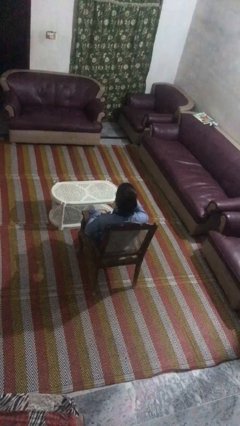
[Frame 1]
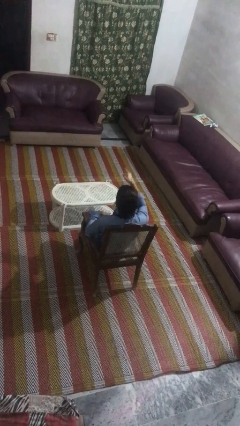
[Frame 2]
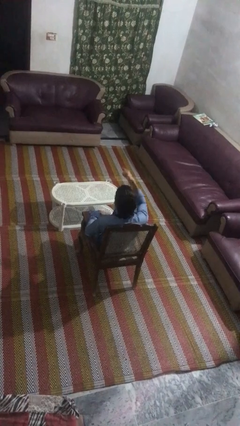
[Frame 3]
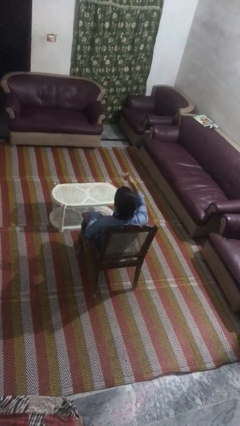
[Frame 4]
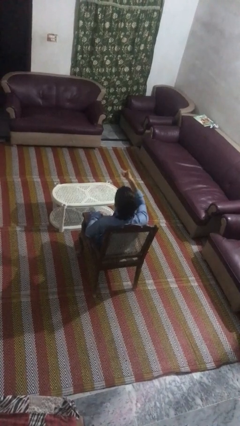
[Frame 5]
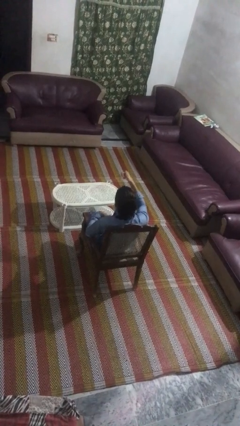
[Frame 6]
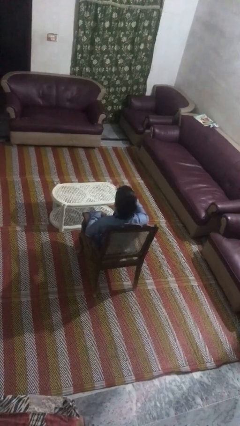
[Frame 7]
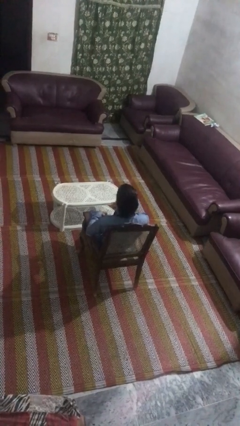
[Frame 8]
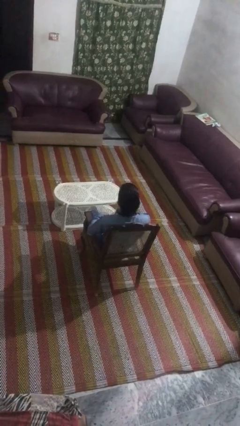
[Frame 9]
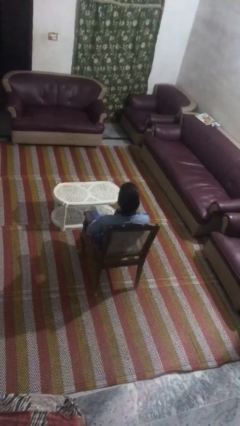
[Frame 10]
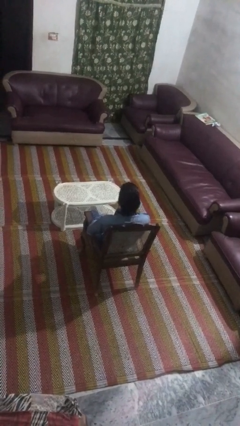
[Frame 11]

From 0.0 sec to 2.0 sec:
person gestures hang loose

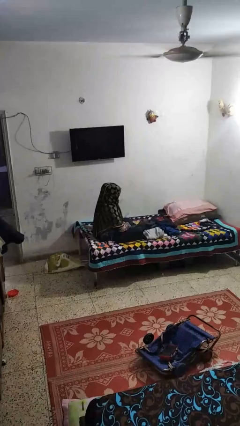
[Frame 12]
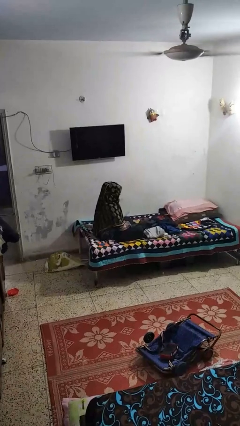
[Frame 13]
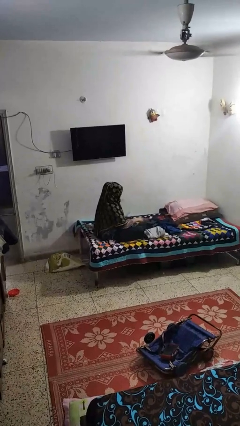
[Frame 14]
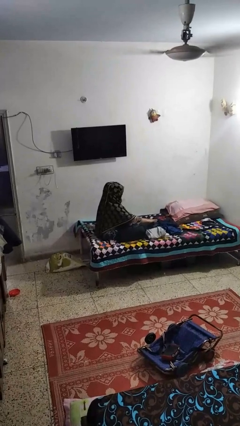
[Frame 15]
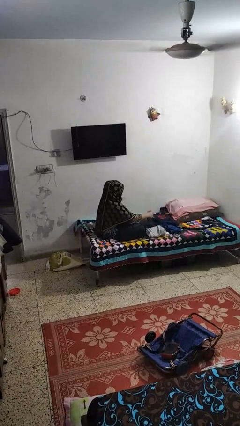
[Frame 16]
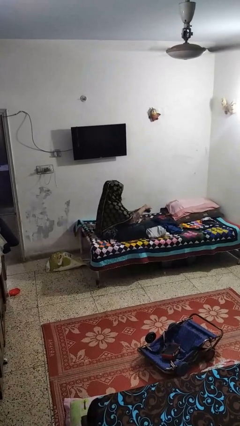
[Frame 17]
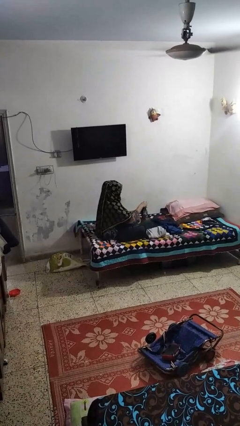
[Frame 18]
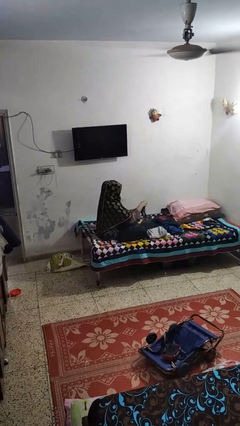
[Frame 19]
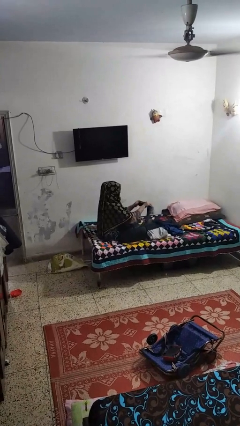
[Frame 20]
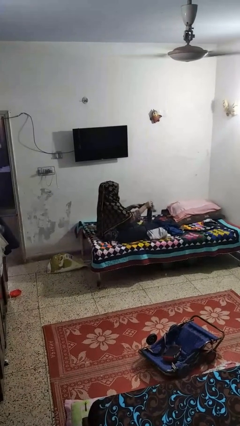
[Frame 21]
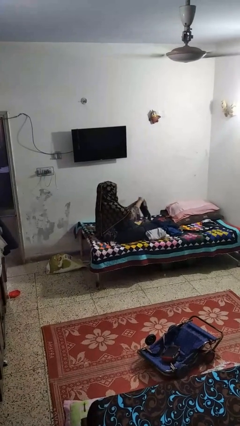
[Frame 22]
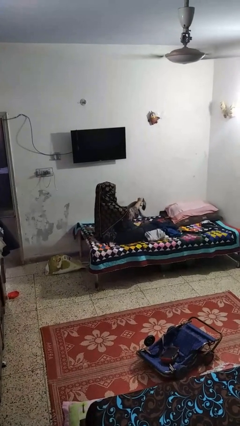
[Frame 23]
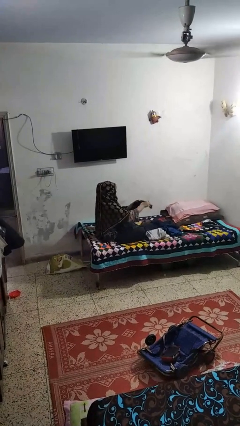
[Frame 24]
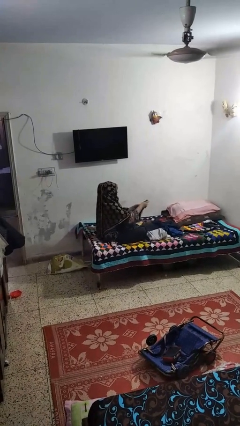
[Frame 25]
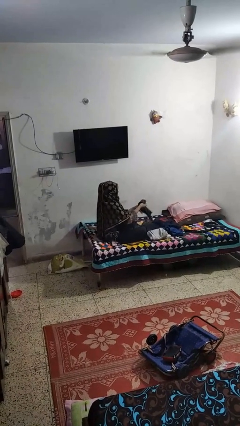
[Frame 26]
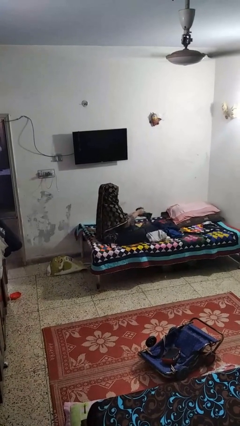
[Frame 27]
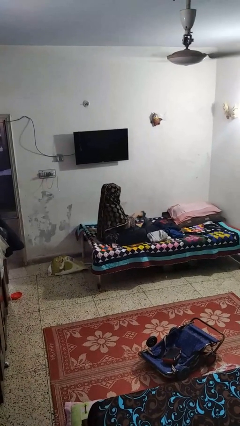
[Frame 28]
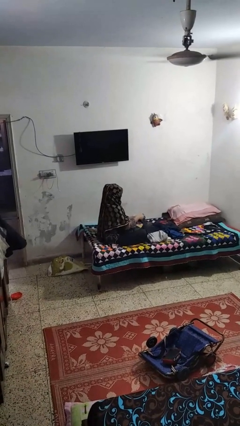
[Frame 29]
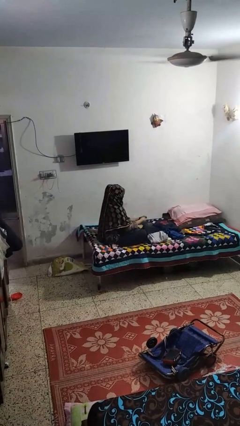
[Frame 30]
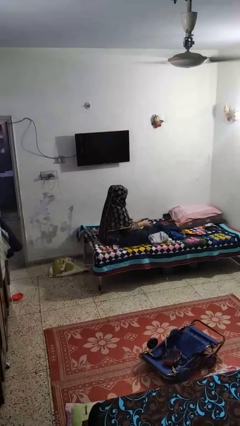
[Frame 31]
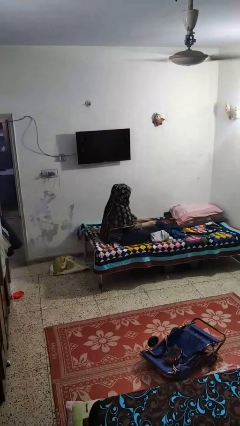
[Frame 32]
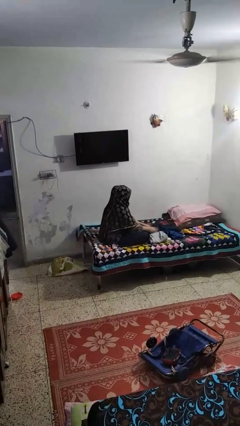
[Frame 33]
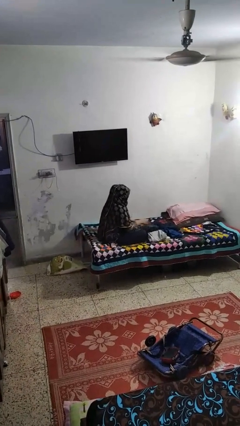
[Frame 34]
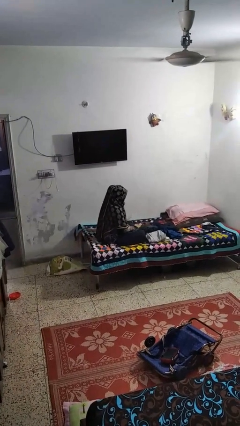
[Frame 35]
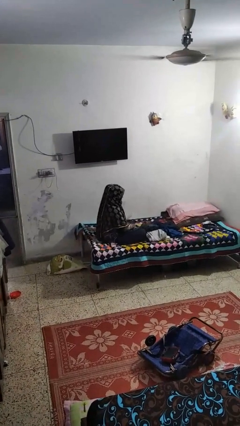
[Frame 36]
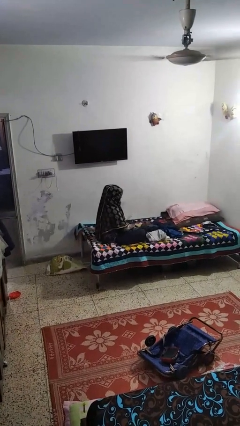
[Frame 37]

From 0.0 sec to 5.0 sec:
person folds socks

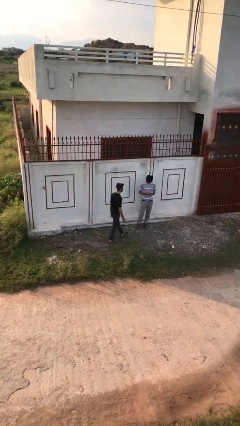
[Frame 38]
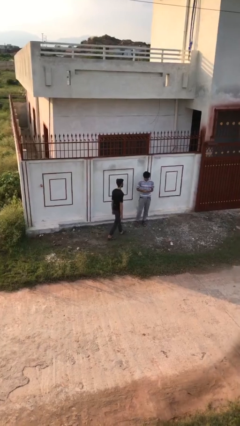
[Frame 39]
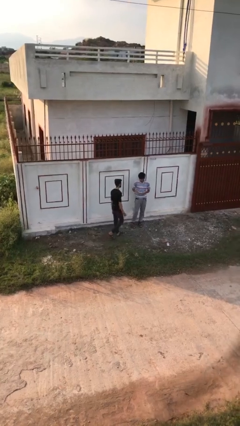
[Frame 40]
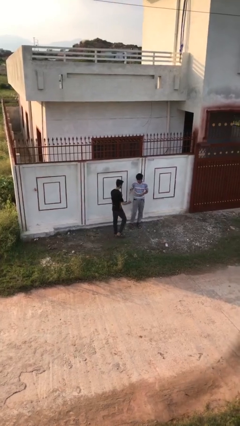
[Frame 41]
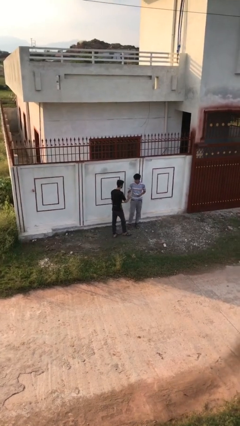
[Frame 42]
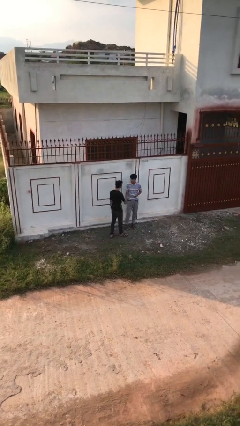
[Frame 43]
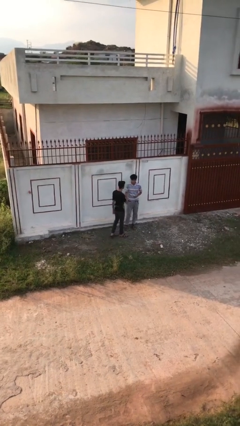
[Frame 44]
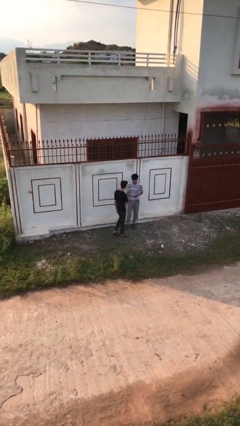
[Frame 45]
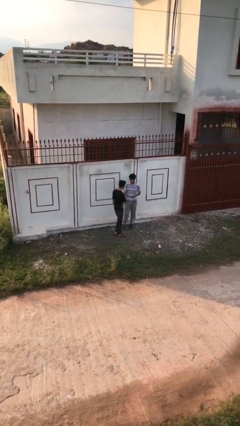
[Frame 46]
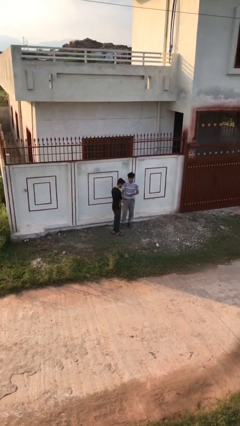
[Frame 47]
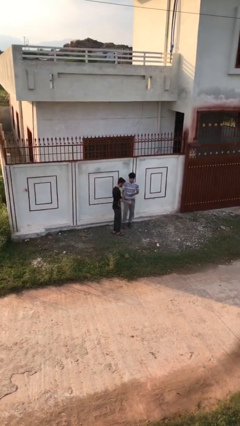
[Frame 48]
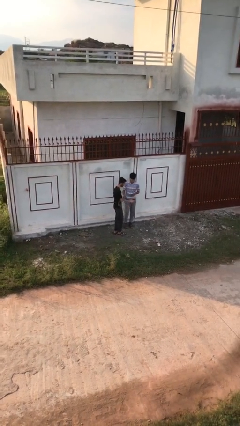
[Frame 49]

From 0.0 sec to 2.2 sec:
person shakes hand

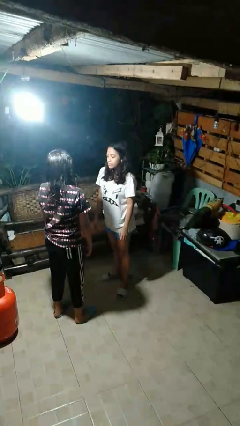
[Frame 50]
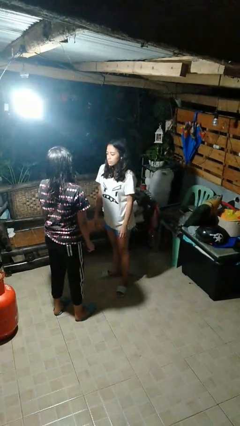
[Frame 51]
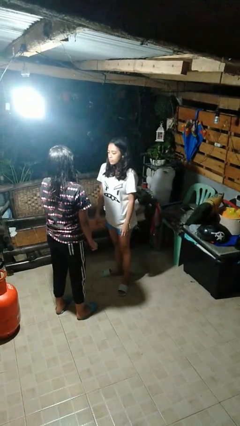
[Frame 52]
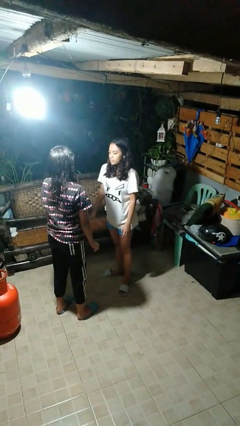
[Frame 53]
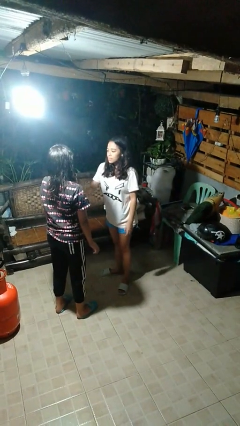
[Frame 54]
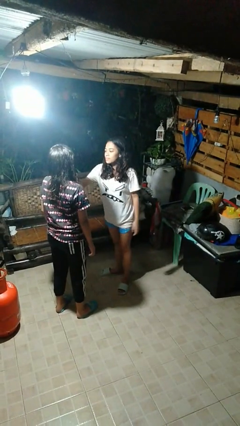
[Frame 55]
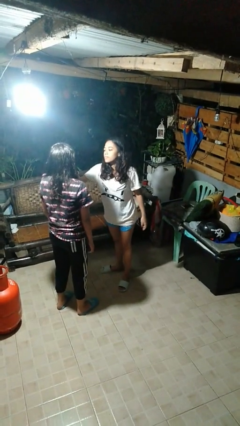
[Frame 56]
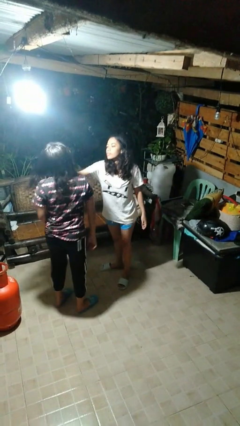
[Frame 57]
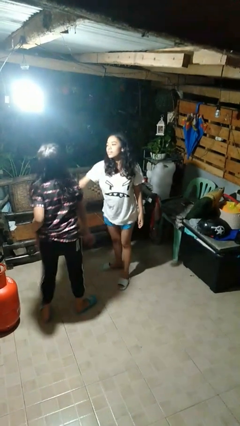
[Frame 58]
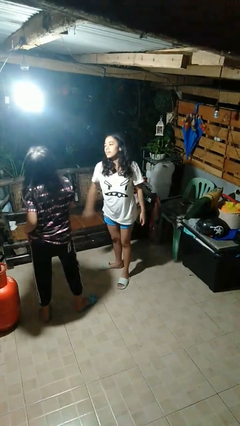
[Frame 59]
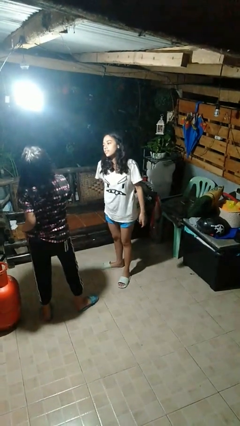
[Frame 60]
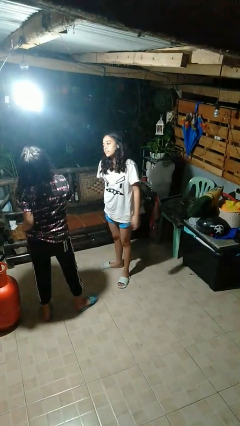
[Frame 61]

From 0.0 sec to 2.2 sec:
person shoves person

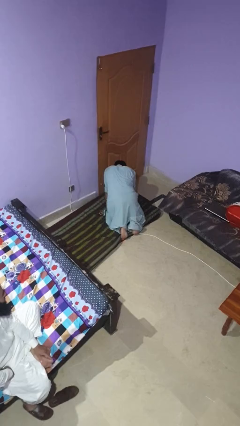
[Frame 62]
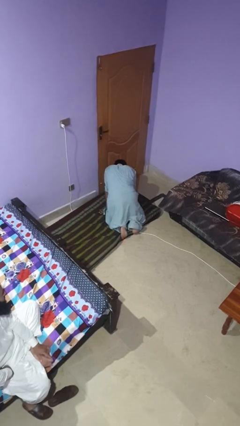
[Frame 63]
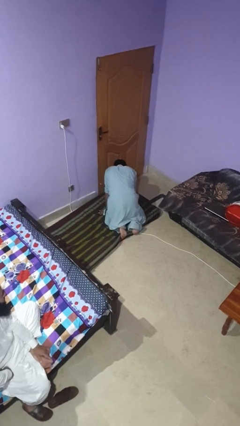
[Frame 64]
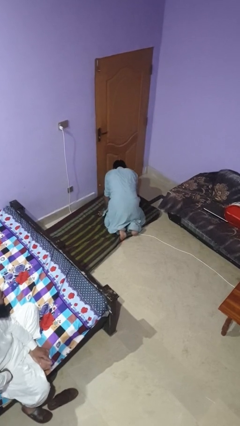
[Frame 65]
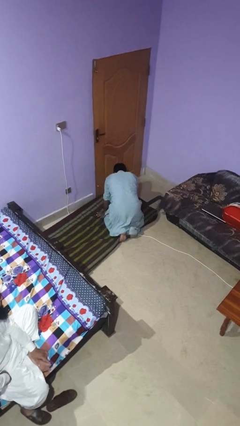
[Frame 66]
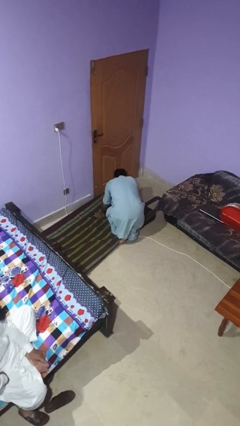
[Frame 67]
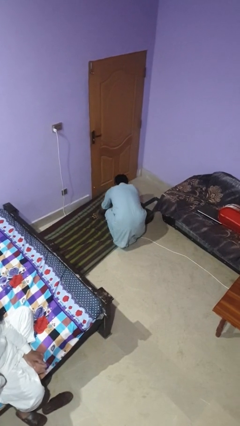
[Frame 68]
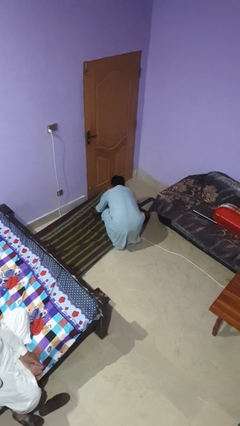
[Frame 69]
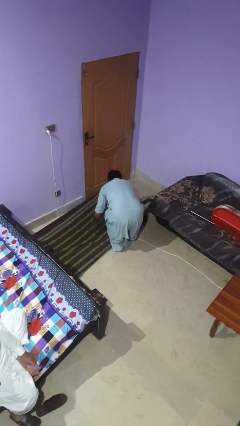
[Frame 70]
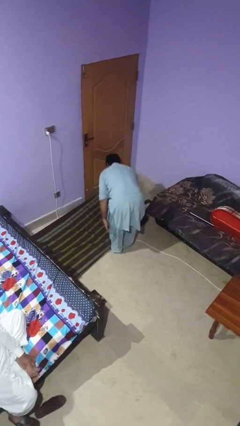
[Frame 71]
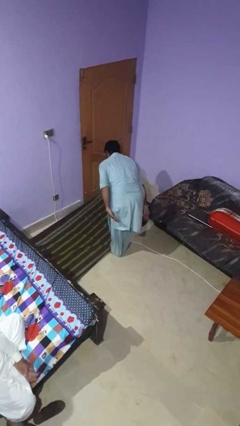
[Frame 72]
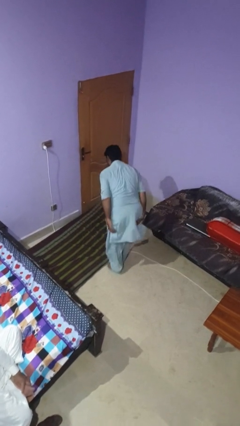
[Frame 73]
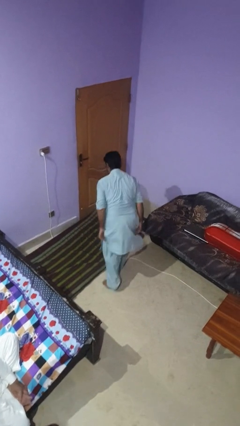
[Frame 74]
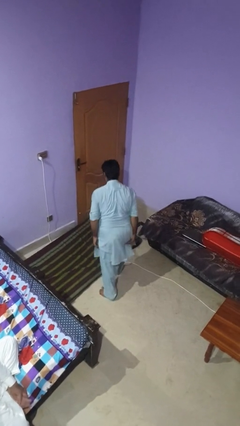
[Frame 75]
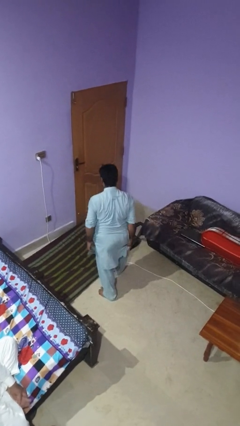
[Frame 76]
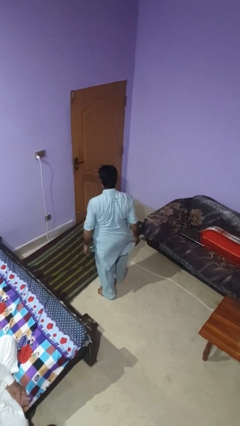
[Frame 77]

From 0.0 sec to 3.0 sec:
person stands up from floor

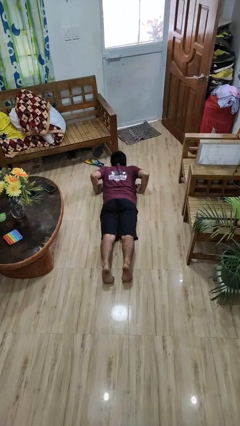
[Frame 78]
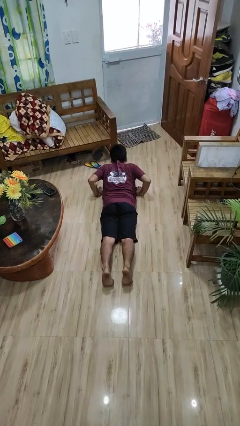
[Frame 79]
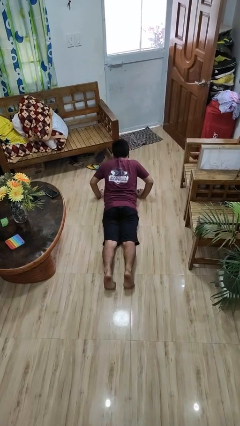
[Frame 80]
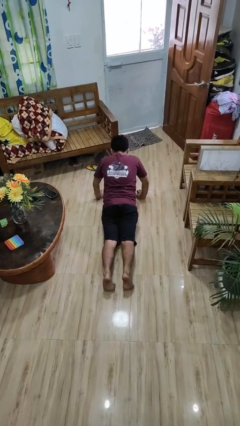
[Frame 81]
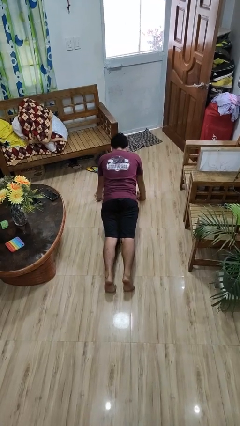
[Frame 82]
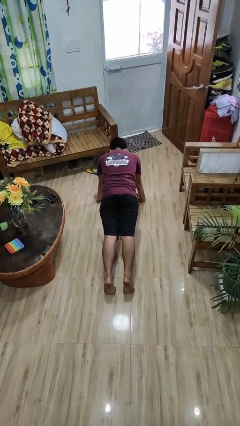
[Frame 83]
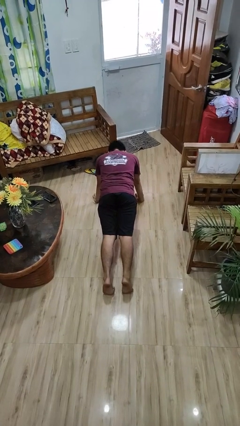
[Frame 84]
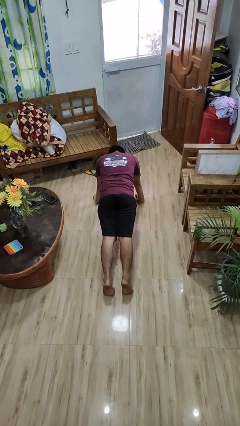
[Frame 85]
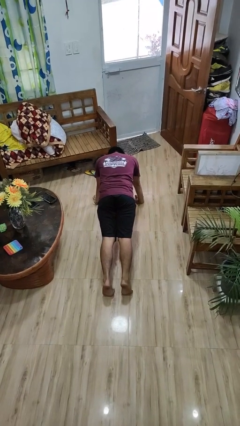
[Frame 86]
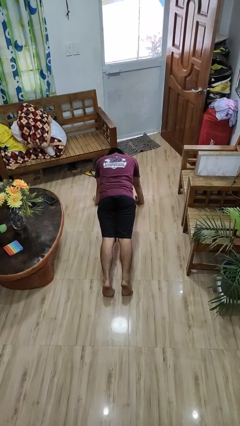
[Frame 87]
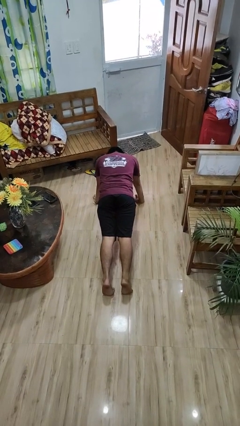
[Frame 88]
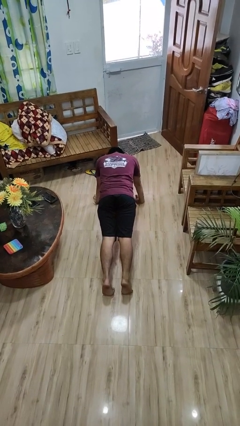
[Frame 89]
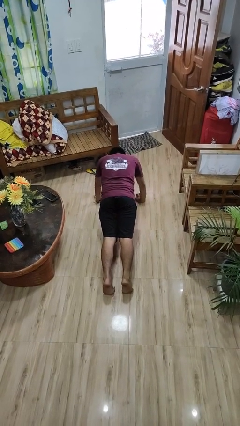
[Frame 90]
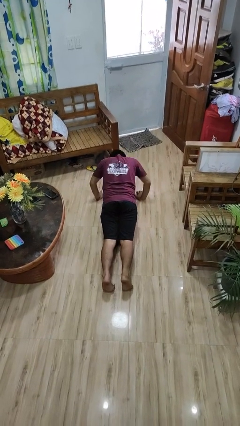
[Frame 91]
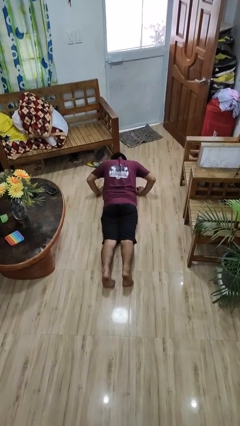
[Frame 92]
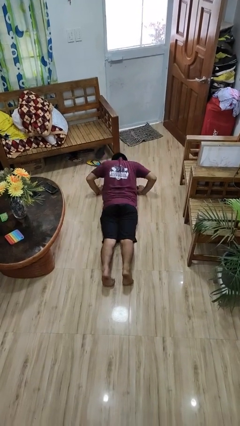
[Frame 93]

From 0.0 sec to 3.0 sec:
person exercises with pushup
